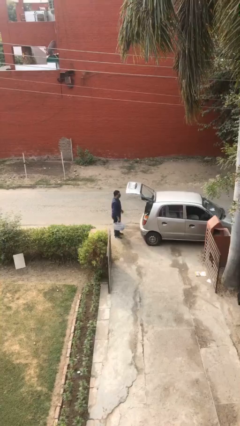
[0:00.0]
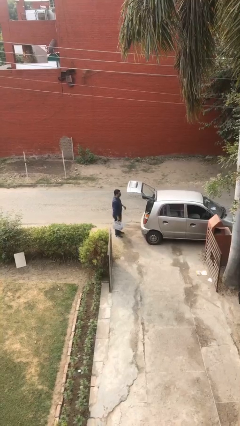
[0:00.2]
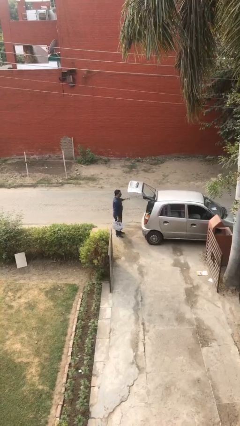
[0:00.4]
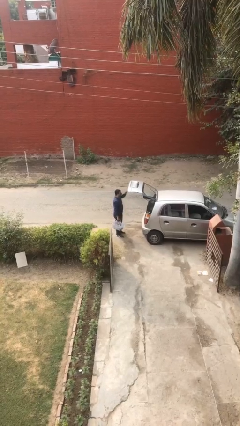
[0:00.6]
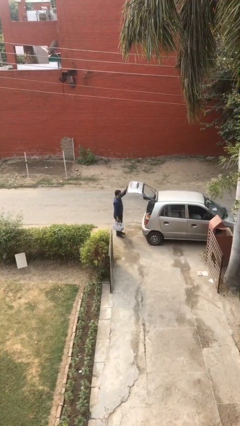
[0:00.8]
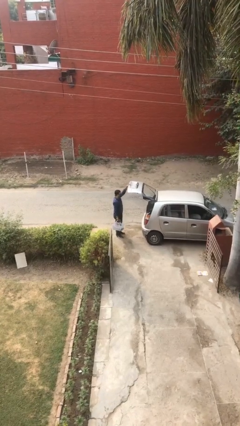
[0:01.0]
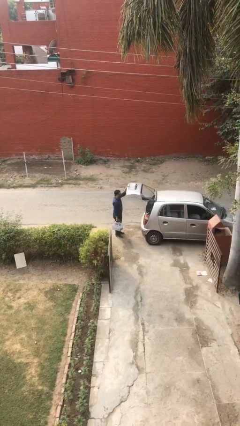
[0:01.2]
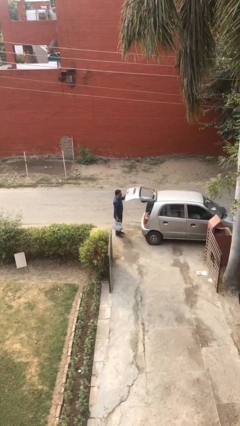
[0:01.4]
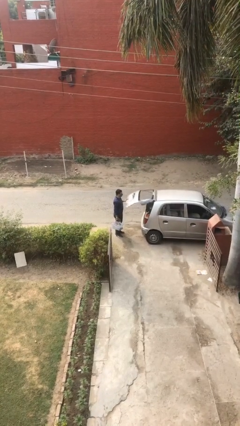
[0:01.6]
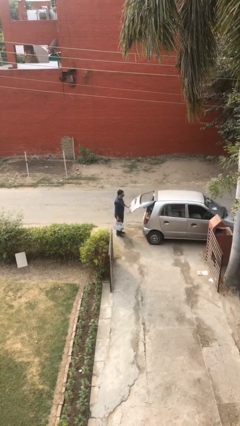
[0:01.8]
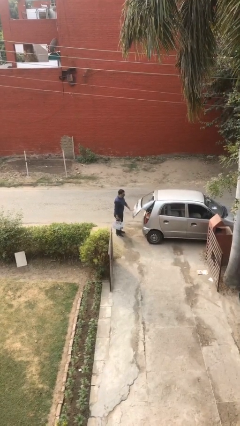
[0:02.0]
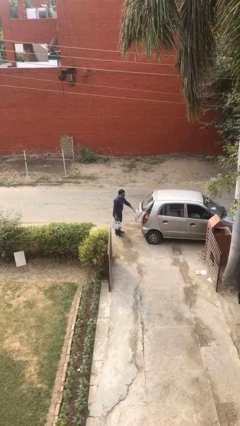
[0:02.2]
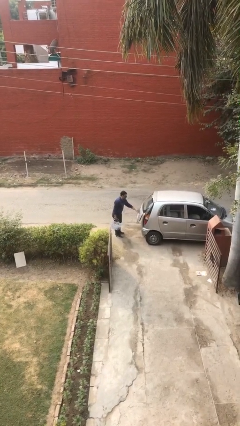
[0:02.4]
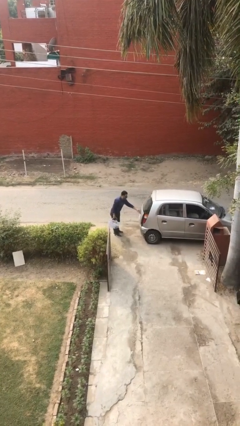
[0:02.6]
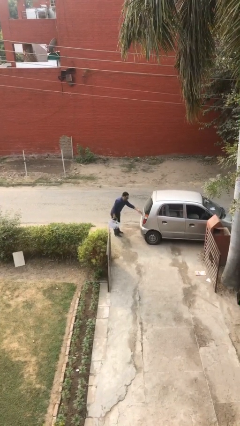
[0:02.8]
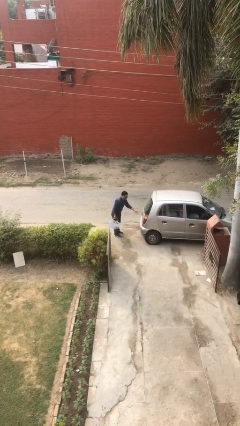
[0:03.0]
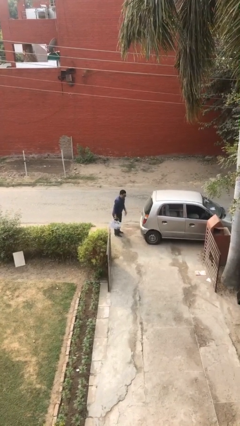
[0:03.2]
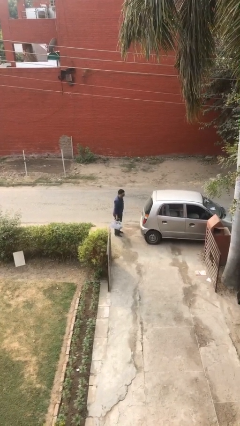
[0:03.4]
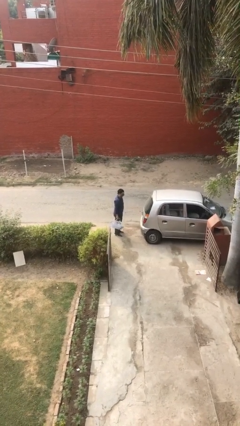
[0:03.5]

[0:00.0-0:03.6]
person closes car trunk

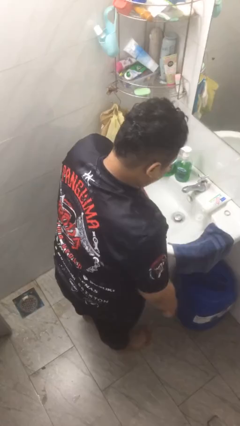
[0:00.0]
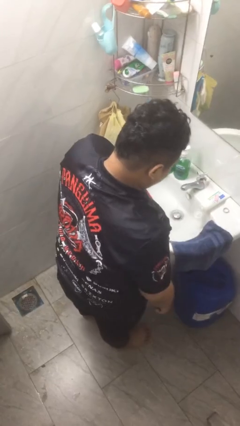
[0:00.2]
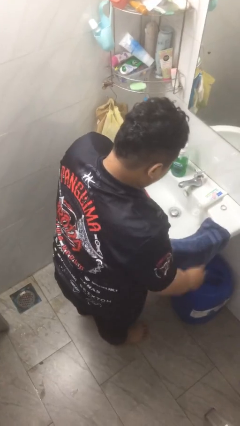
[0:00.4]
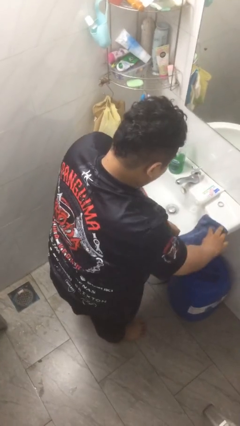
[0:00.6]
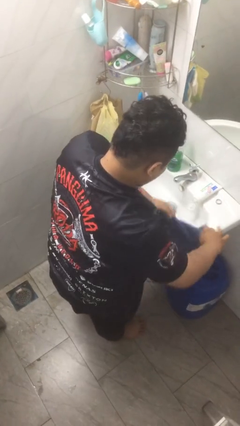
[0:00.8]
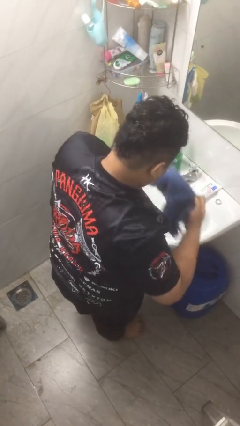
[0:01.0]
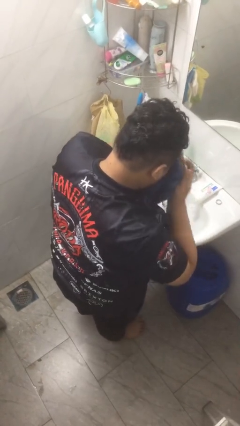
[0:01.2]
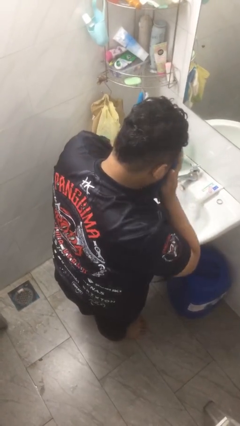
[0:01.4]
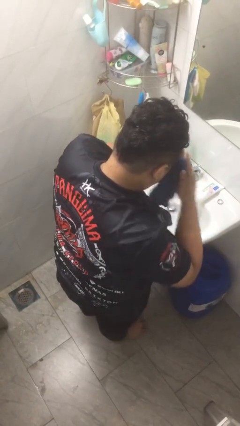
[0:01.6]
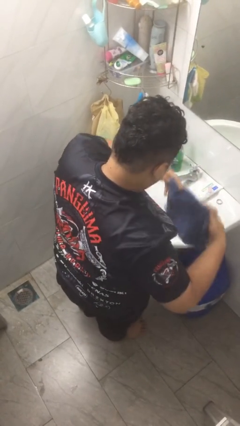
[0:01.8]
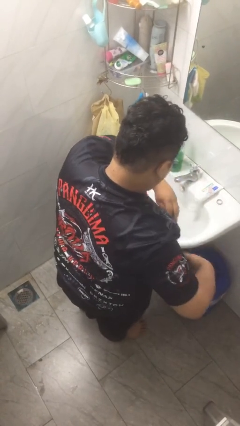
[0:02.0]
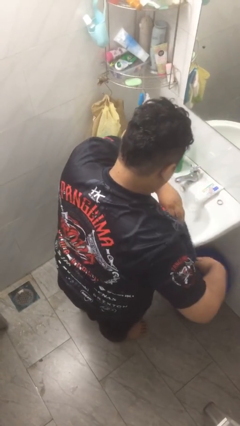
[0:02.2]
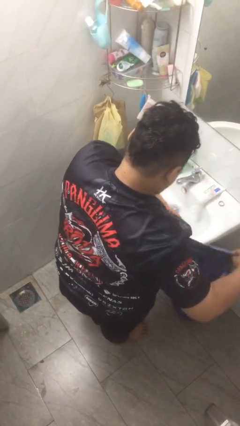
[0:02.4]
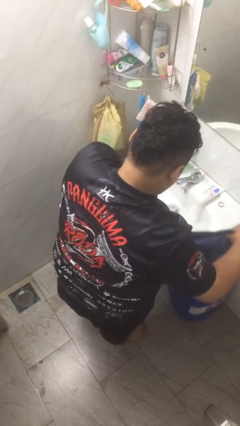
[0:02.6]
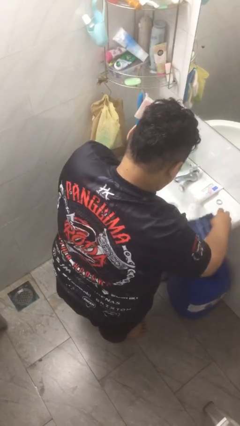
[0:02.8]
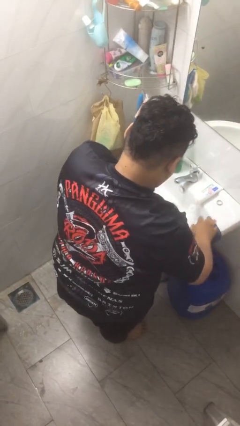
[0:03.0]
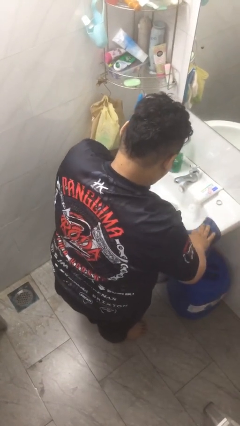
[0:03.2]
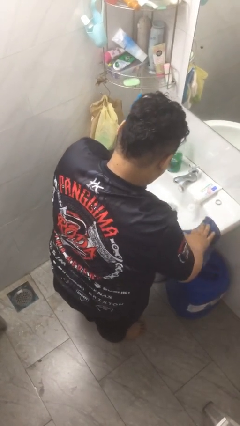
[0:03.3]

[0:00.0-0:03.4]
person dries face with towel

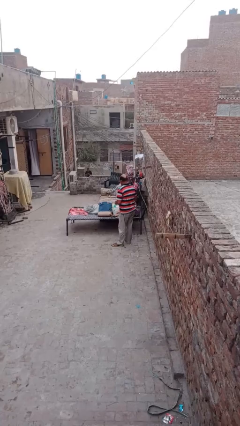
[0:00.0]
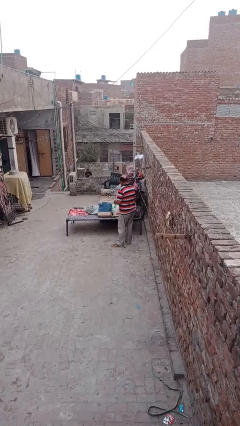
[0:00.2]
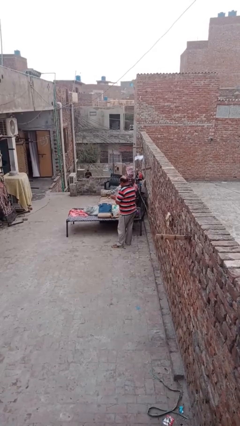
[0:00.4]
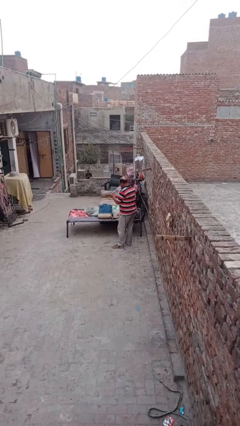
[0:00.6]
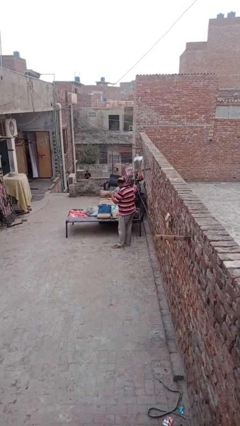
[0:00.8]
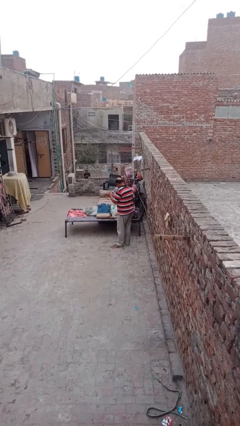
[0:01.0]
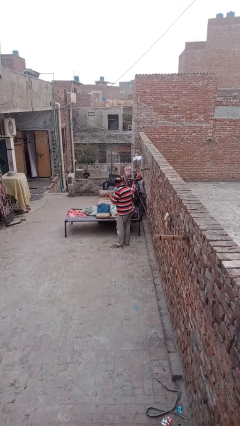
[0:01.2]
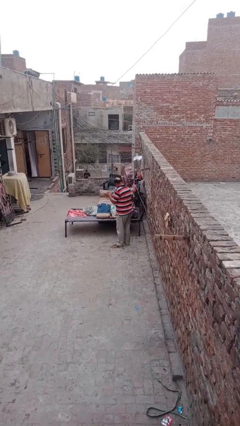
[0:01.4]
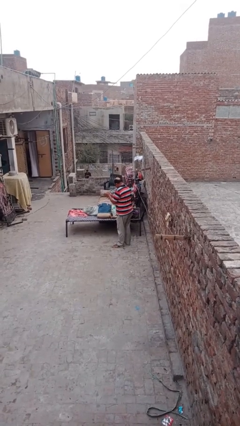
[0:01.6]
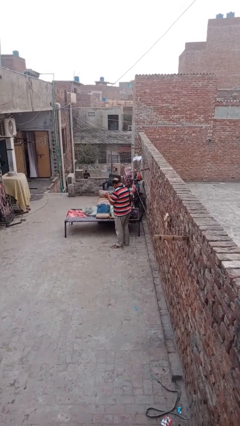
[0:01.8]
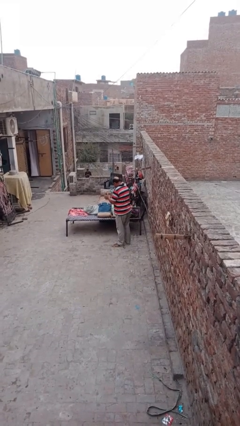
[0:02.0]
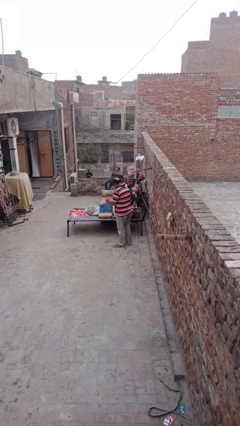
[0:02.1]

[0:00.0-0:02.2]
person blows into hands

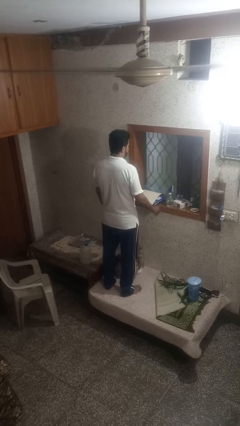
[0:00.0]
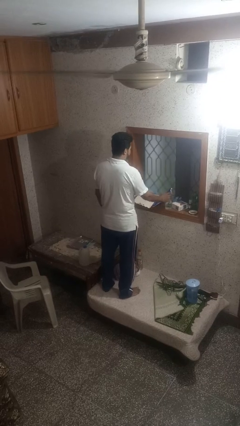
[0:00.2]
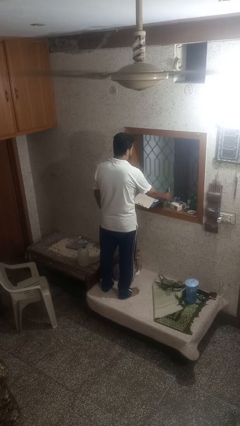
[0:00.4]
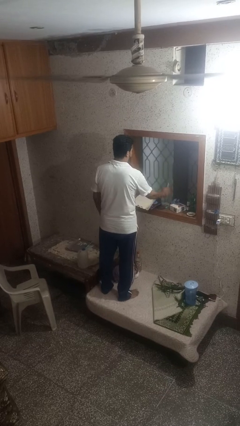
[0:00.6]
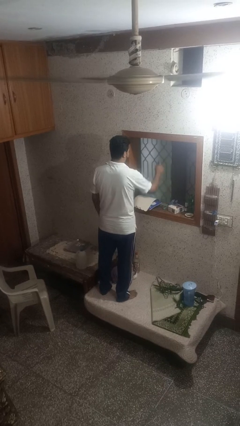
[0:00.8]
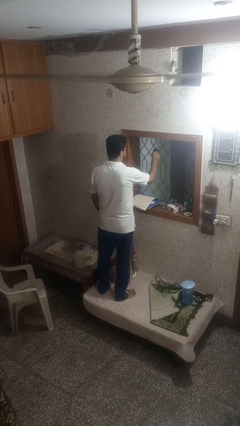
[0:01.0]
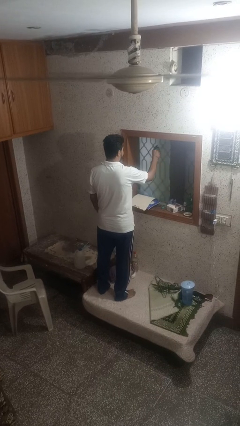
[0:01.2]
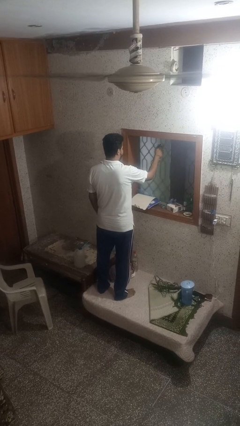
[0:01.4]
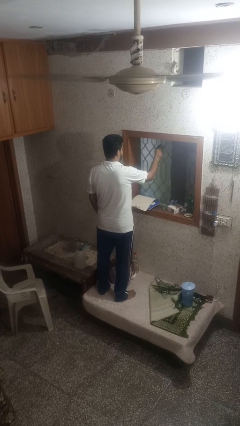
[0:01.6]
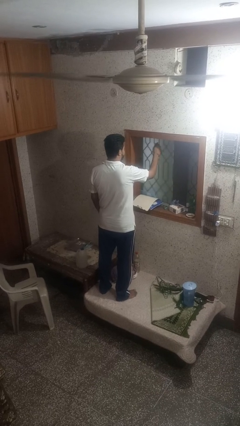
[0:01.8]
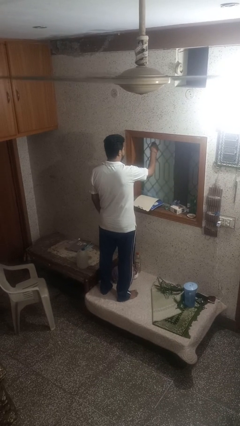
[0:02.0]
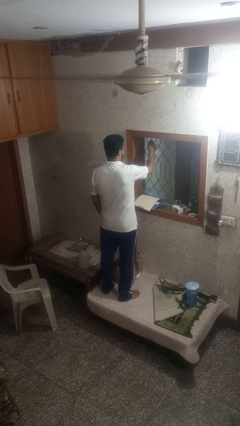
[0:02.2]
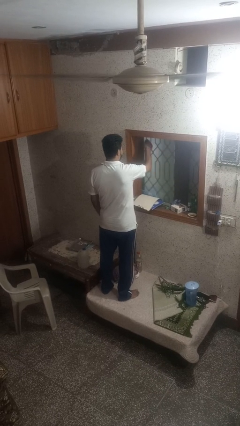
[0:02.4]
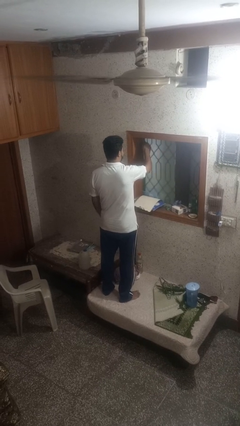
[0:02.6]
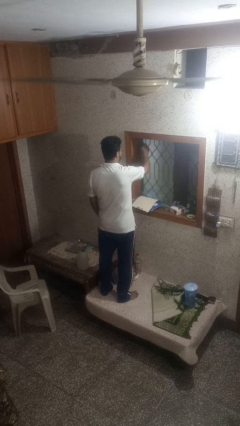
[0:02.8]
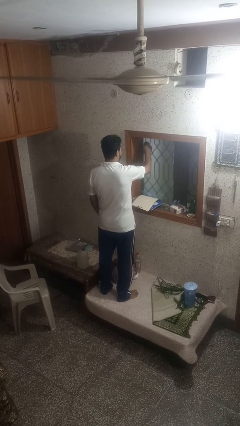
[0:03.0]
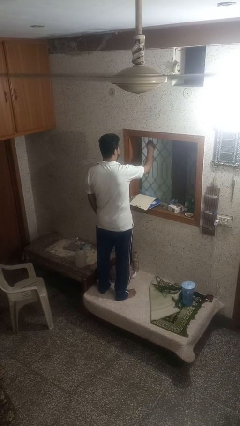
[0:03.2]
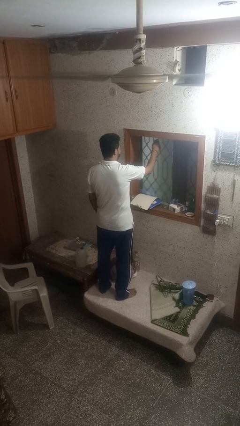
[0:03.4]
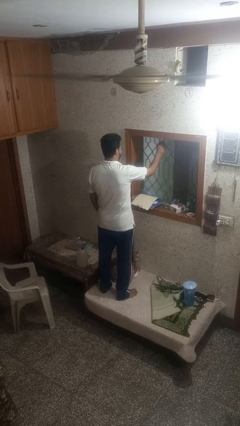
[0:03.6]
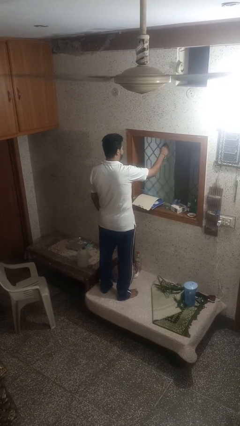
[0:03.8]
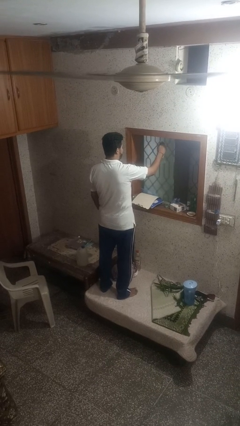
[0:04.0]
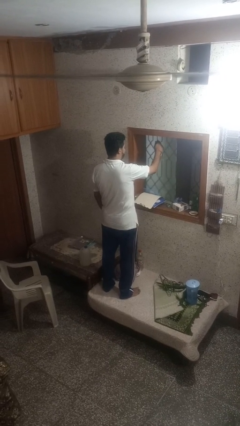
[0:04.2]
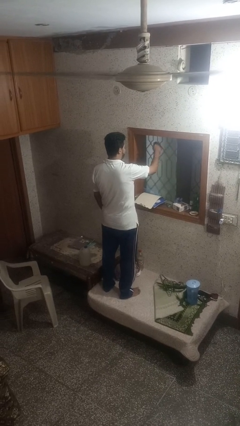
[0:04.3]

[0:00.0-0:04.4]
person sprays from bottle

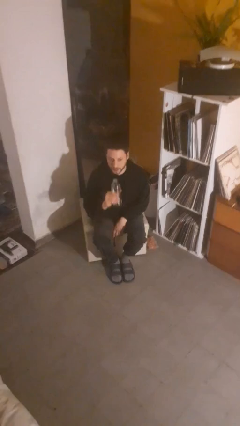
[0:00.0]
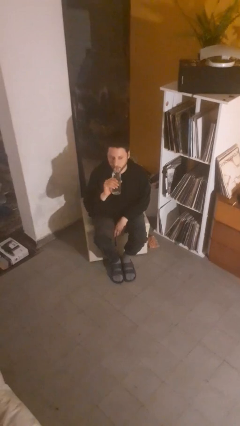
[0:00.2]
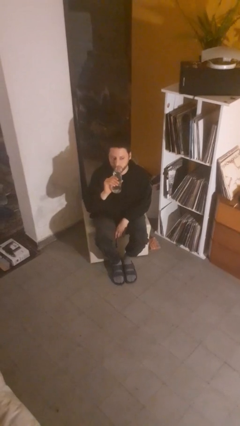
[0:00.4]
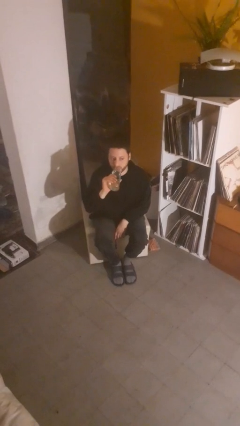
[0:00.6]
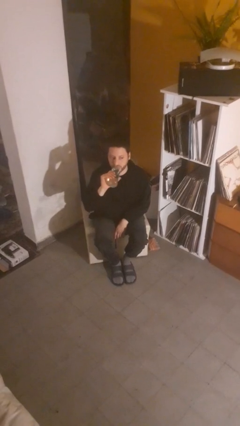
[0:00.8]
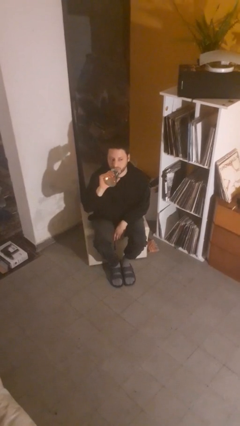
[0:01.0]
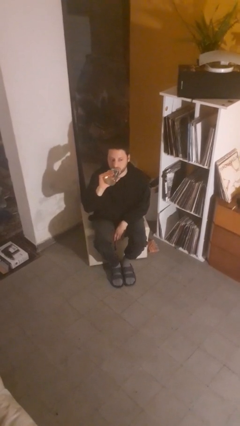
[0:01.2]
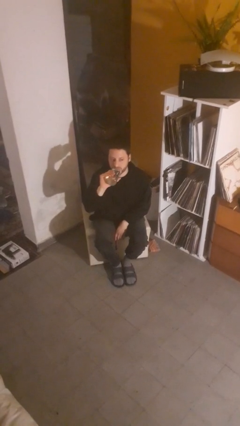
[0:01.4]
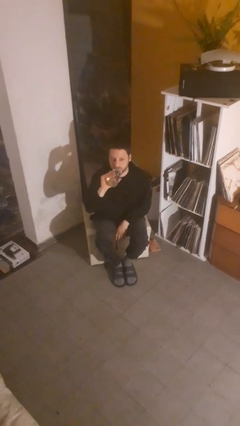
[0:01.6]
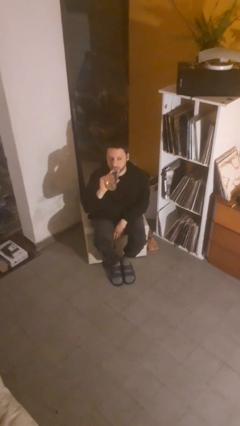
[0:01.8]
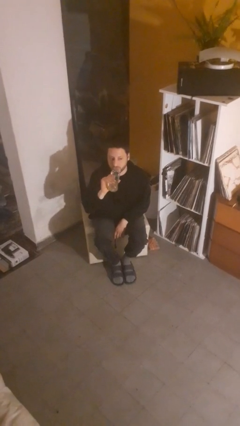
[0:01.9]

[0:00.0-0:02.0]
person drinks from bottle

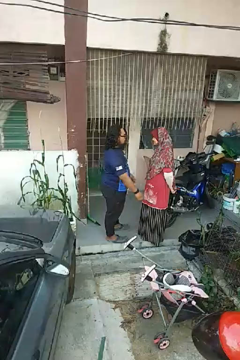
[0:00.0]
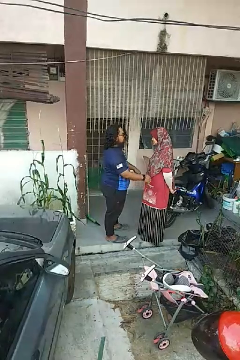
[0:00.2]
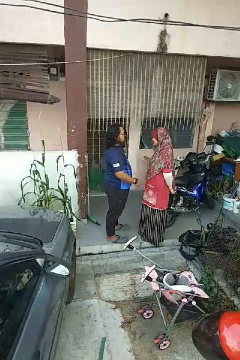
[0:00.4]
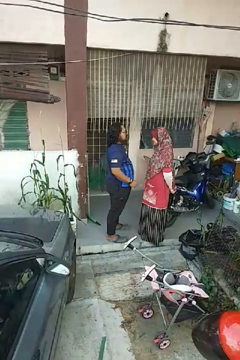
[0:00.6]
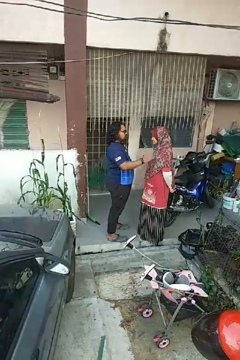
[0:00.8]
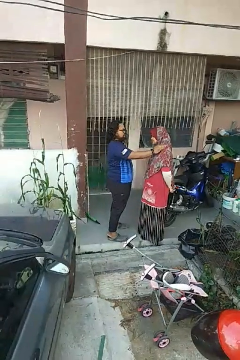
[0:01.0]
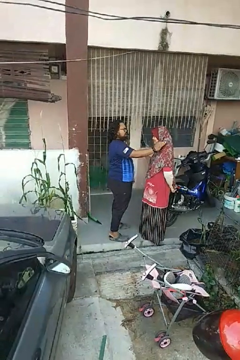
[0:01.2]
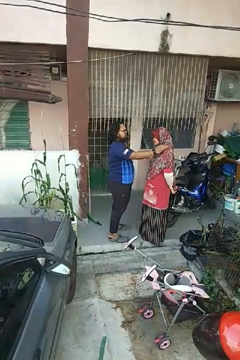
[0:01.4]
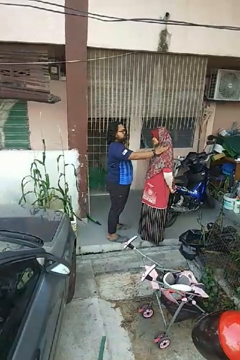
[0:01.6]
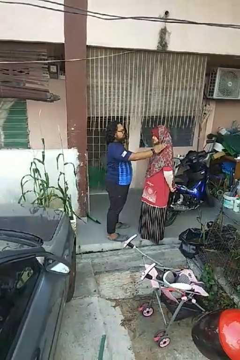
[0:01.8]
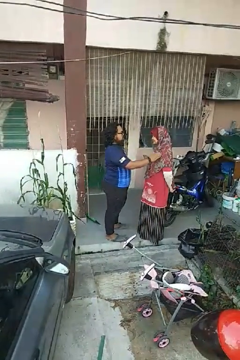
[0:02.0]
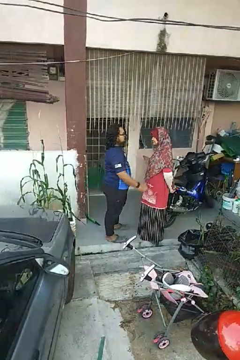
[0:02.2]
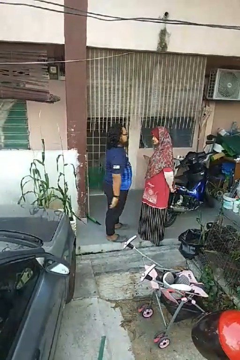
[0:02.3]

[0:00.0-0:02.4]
person pounds shoulders of person
